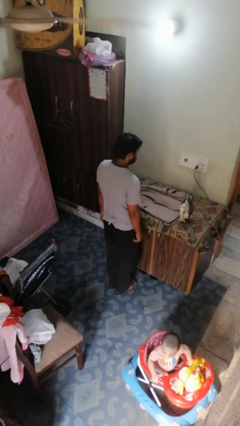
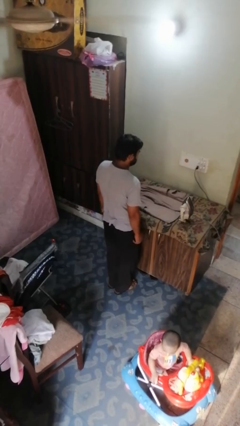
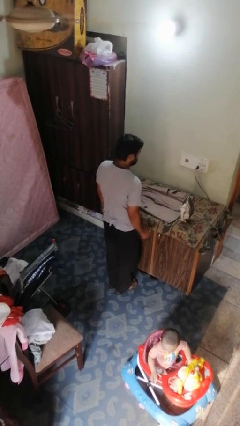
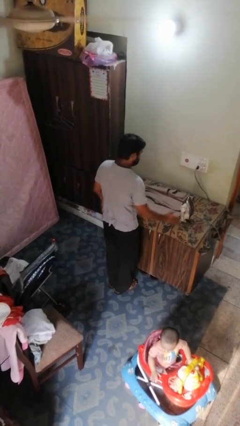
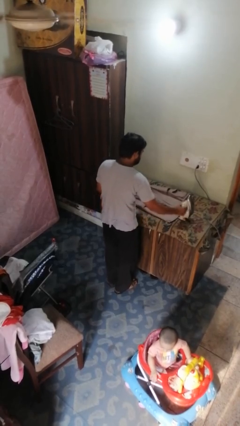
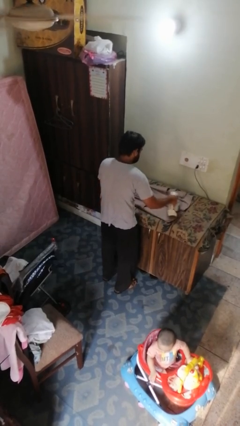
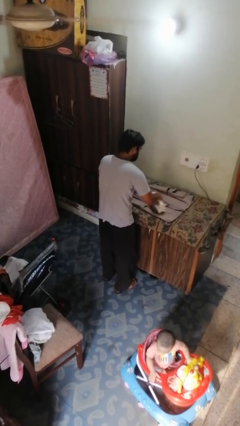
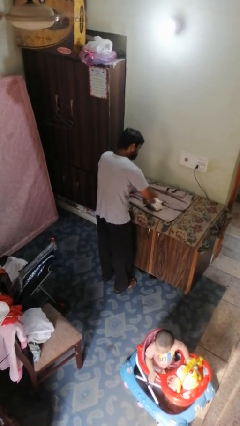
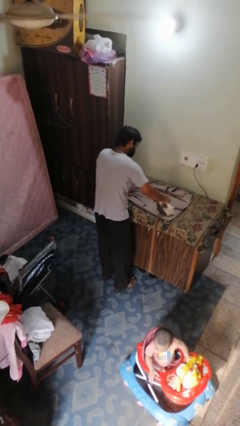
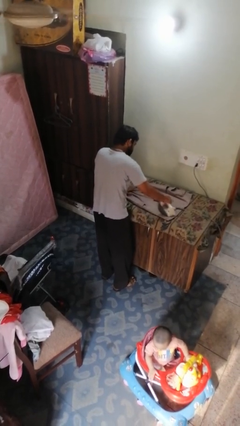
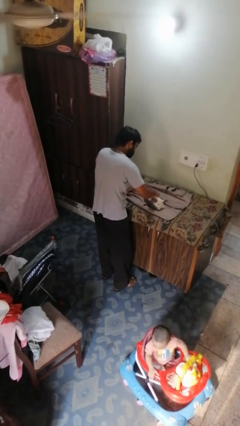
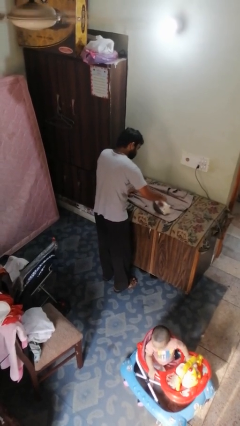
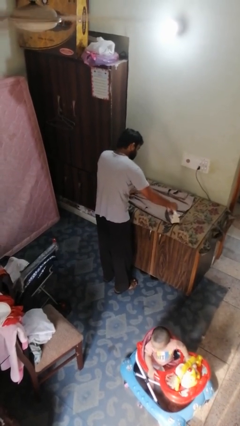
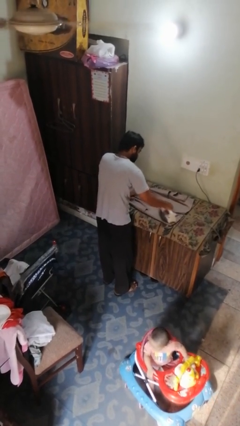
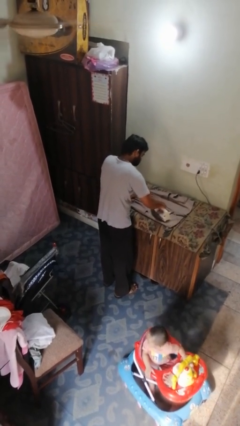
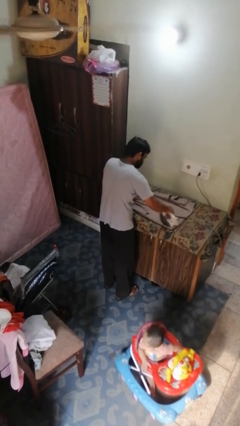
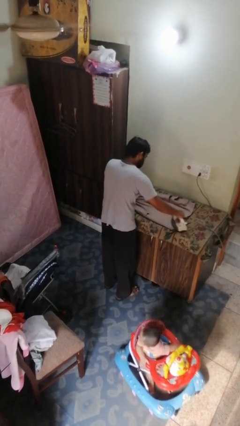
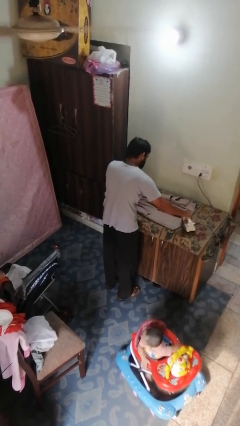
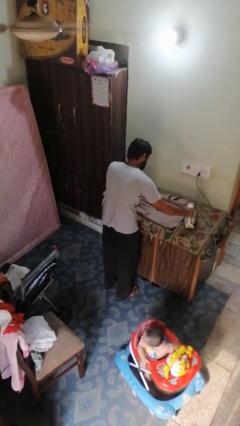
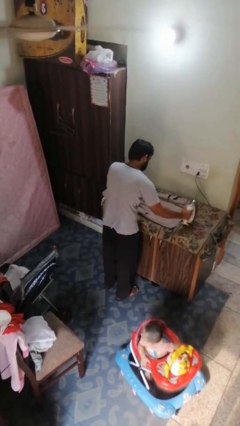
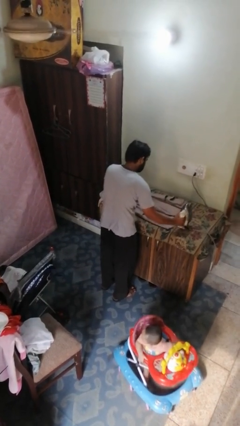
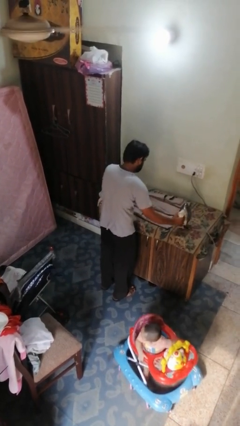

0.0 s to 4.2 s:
person irons clothes

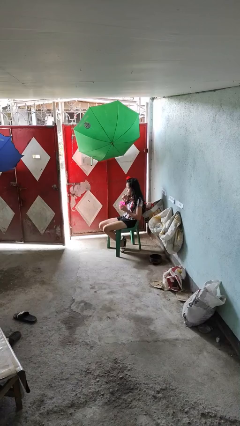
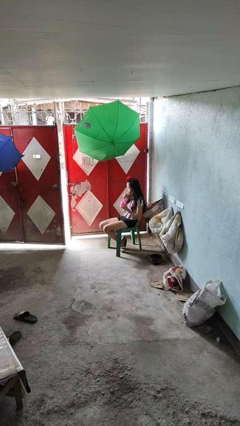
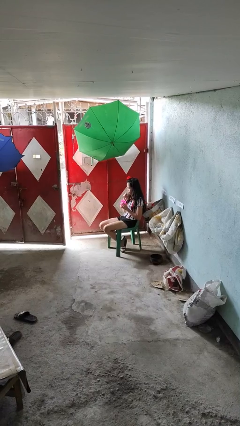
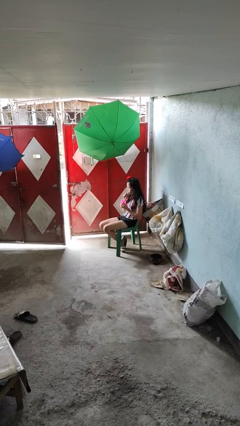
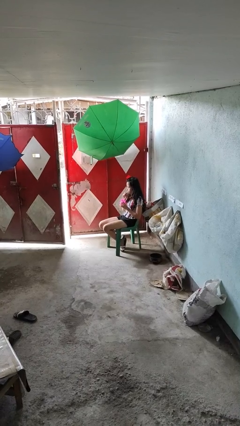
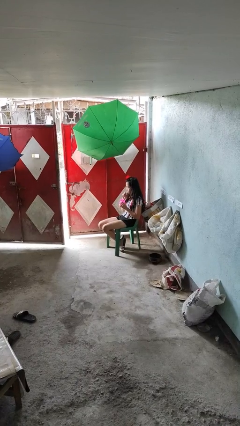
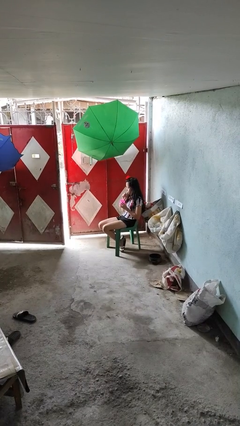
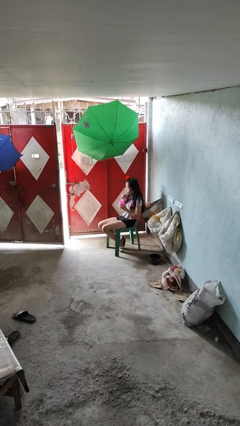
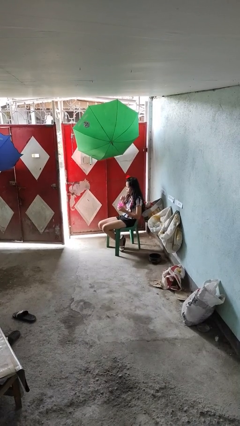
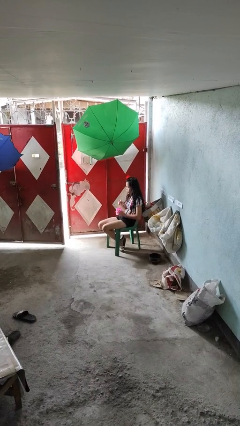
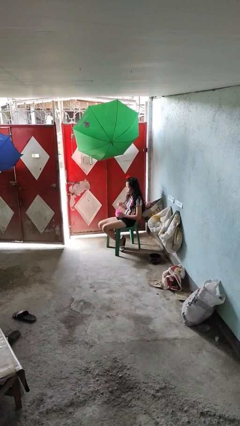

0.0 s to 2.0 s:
person drinks from straw

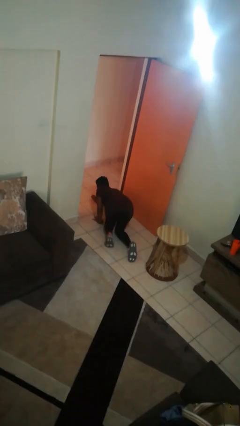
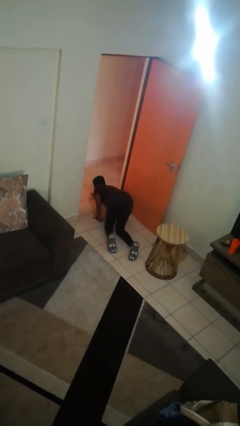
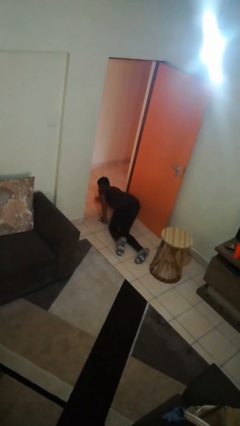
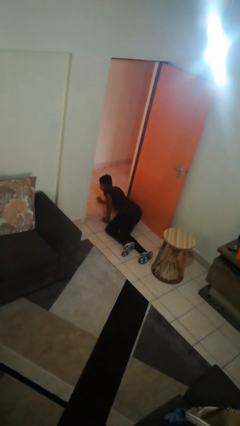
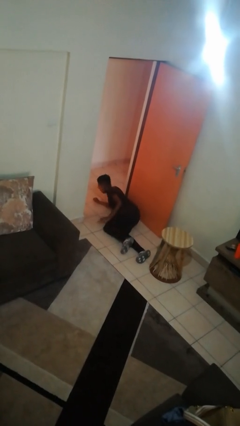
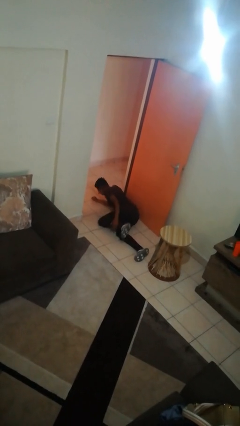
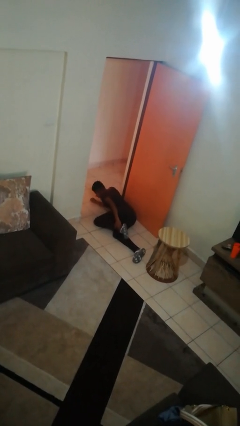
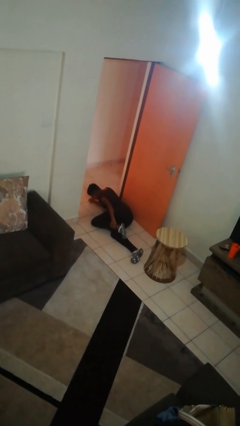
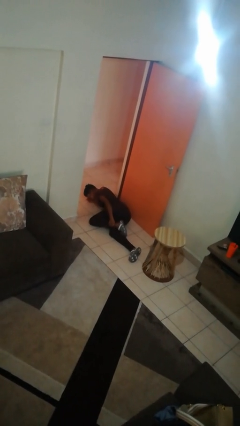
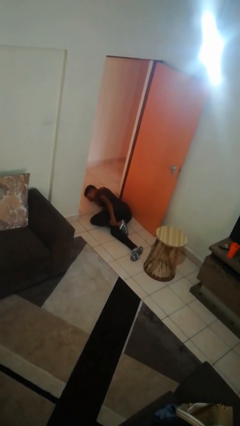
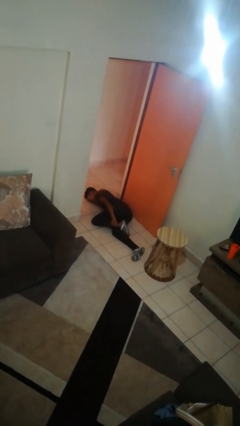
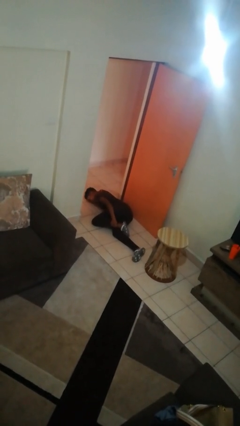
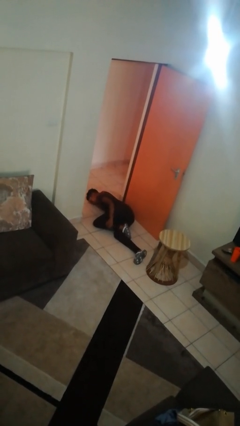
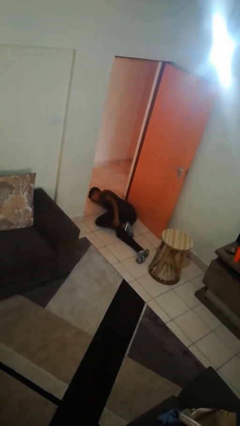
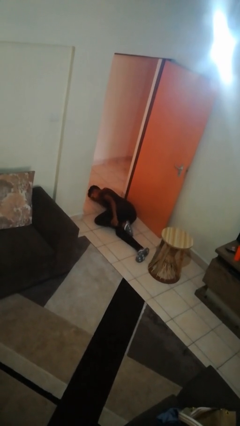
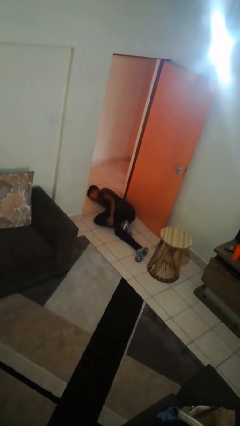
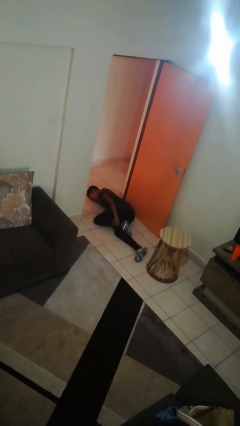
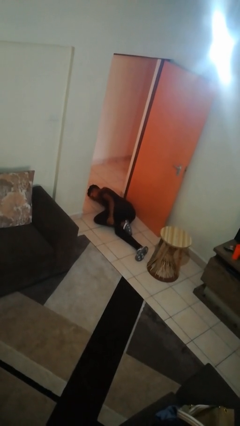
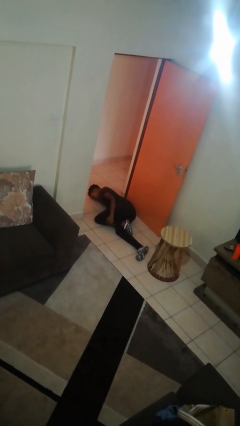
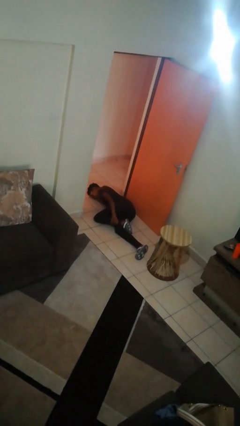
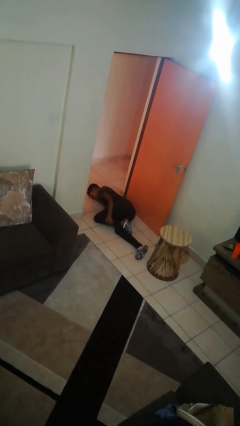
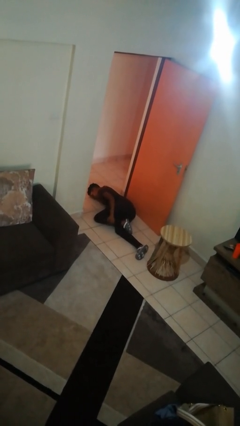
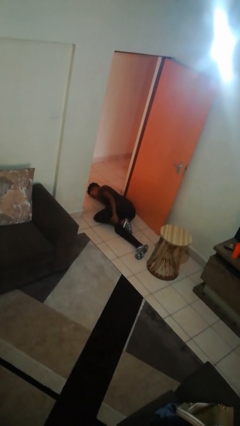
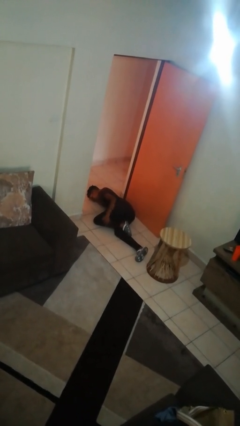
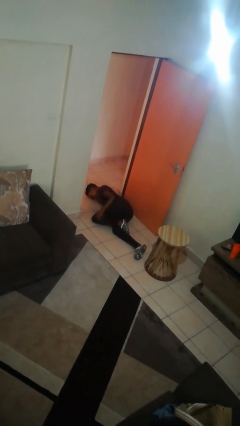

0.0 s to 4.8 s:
person lies down on floor

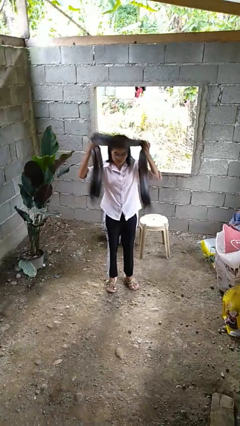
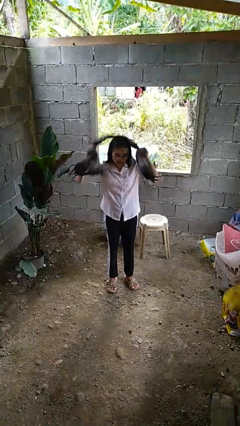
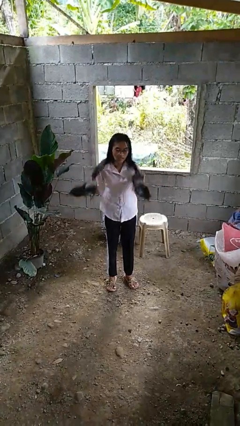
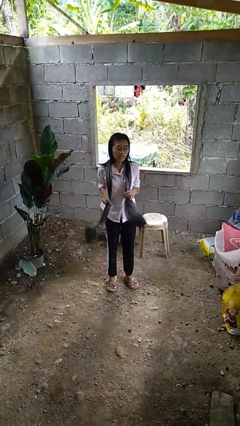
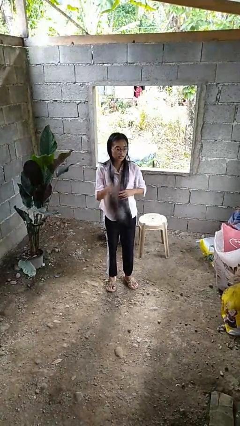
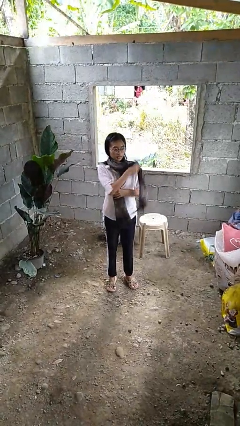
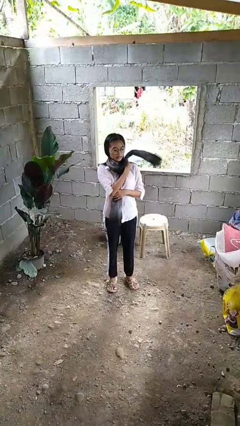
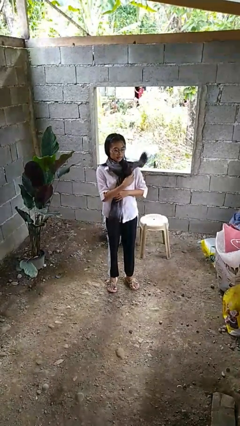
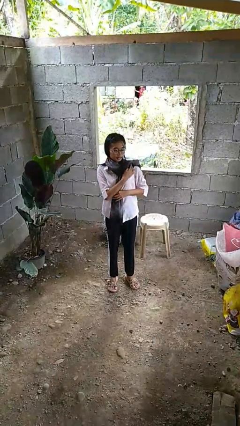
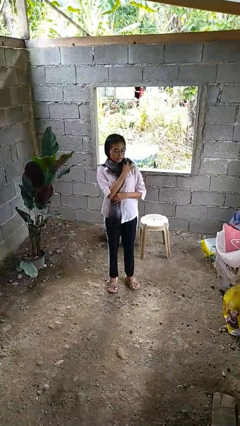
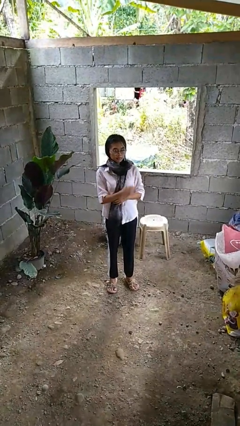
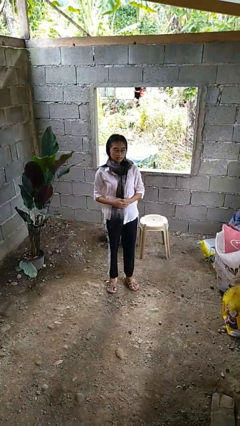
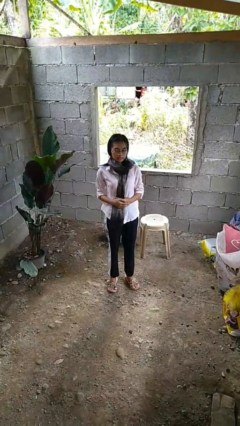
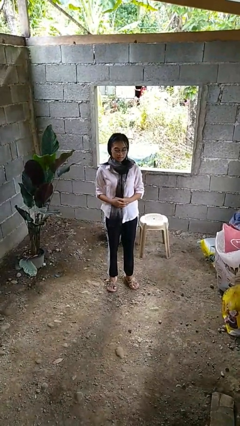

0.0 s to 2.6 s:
person puts on scarf

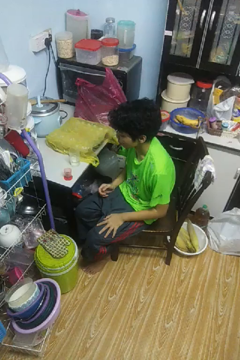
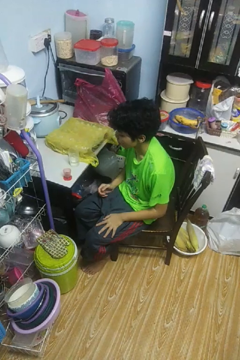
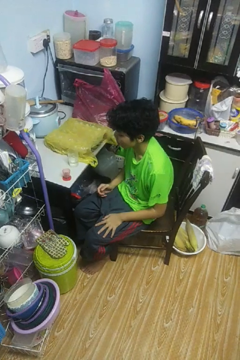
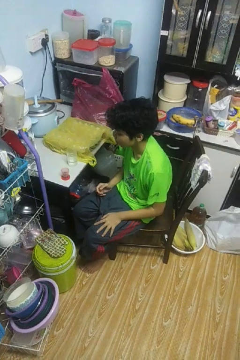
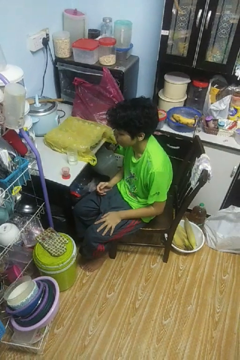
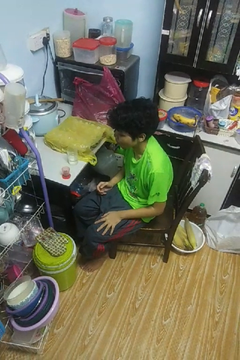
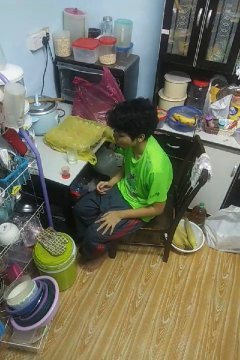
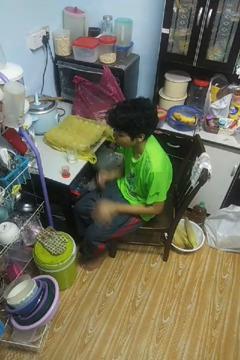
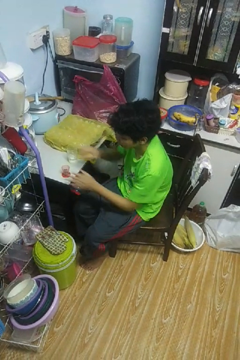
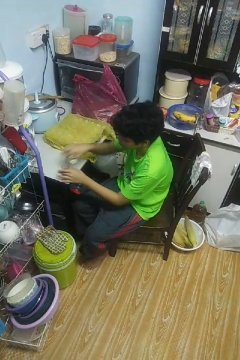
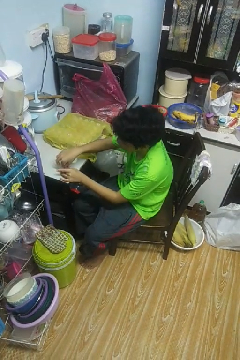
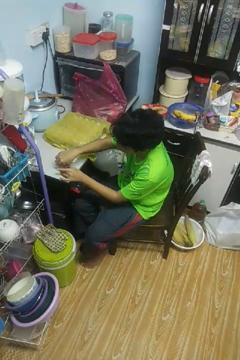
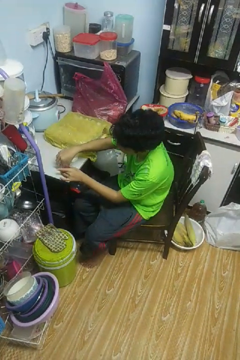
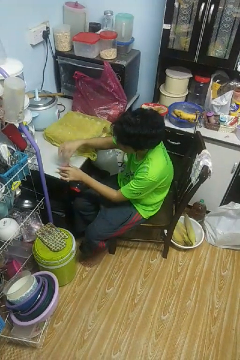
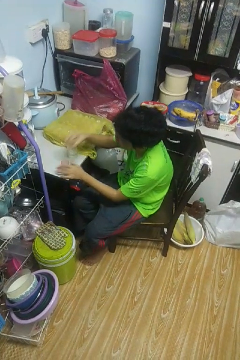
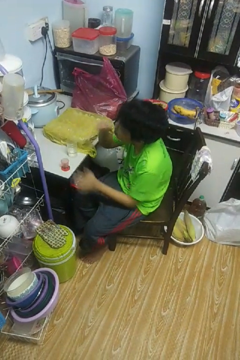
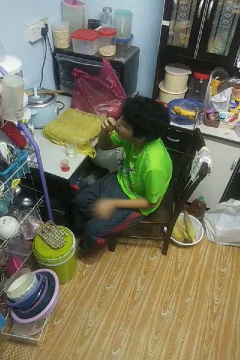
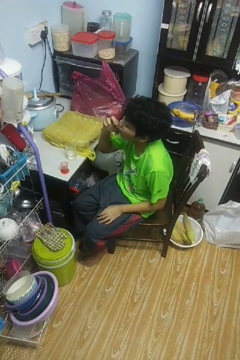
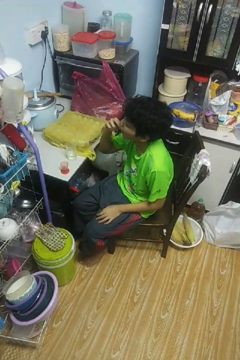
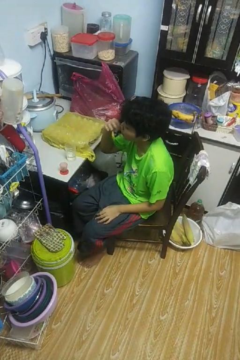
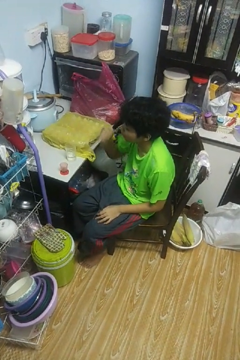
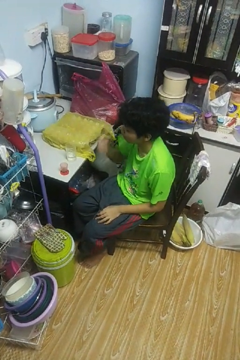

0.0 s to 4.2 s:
person takes medicine pills

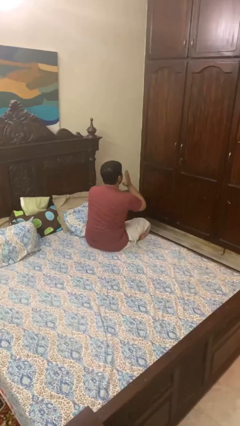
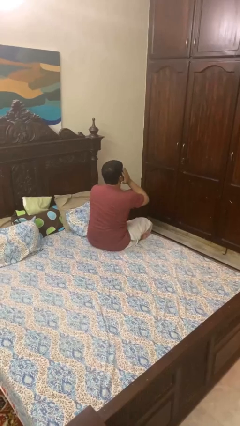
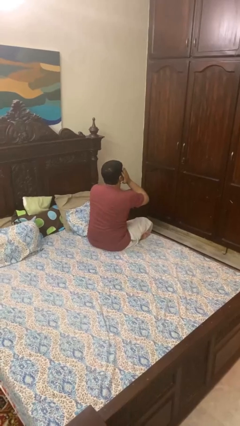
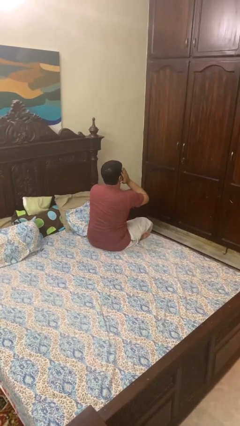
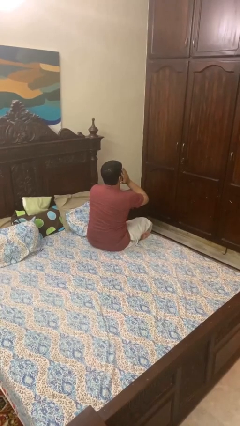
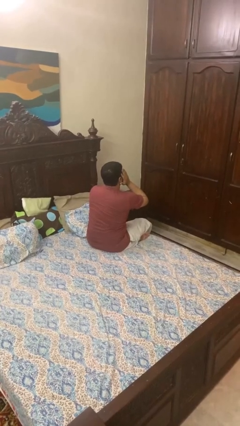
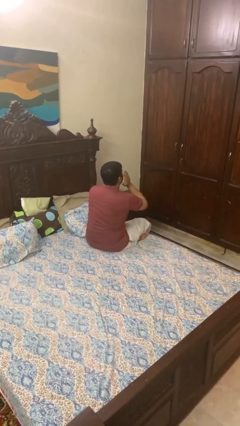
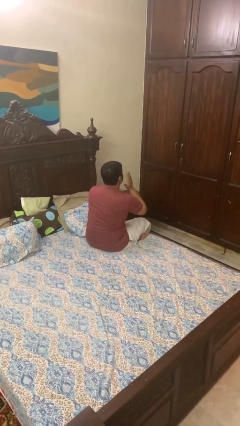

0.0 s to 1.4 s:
person covers face with hands
